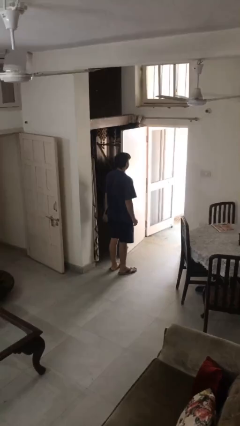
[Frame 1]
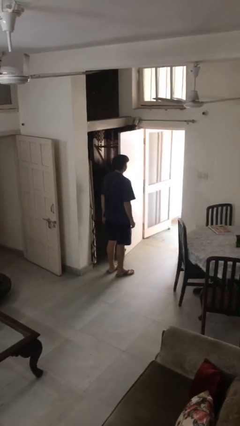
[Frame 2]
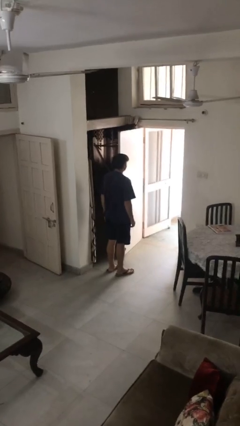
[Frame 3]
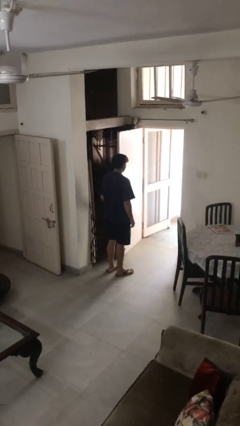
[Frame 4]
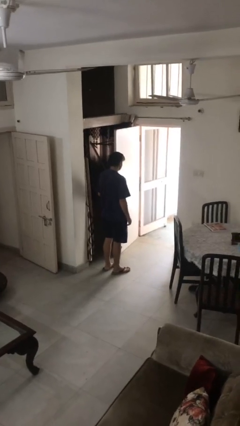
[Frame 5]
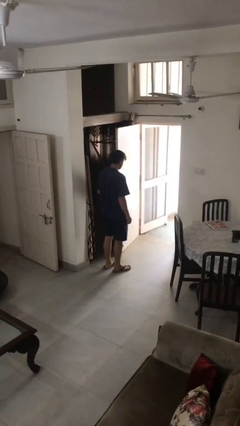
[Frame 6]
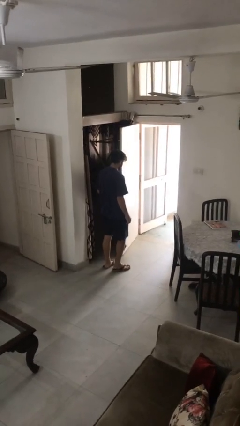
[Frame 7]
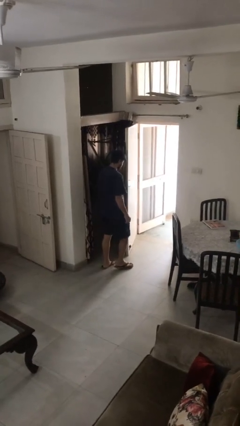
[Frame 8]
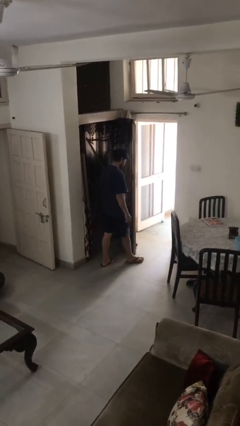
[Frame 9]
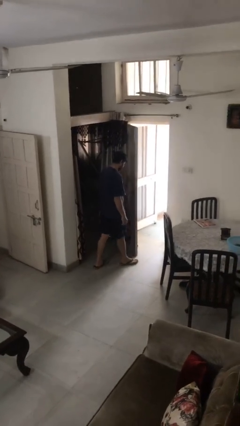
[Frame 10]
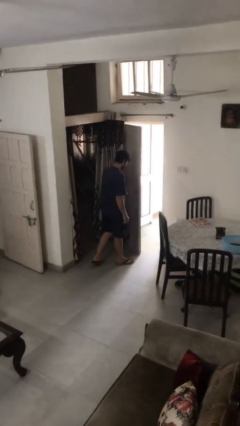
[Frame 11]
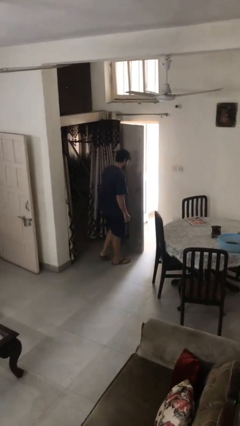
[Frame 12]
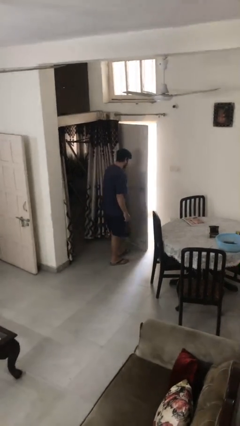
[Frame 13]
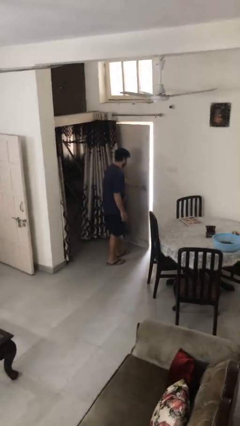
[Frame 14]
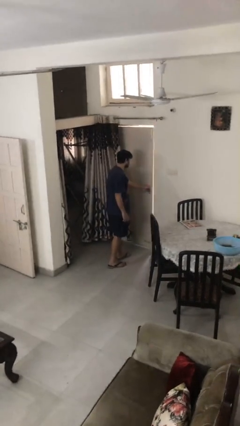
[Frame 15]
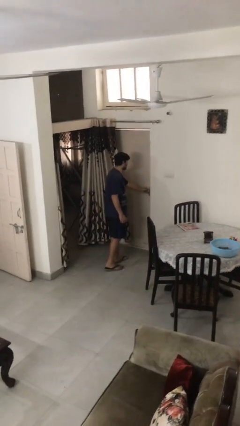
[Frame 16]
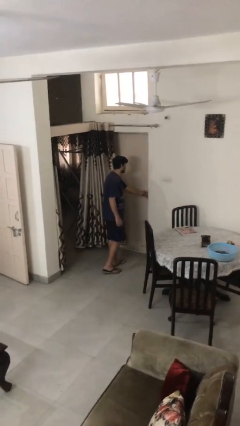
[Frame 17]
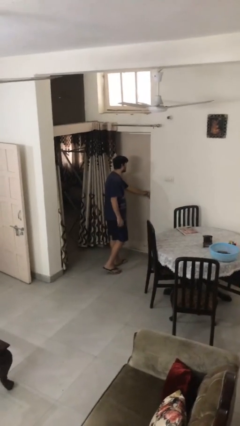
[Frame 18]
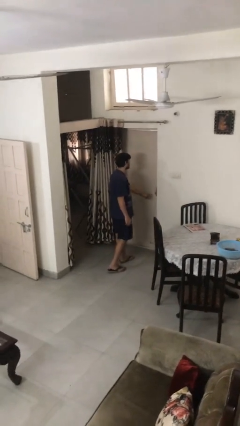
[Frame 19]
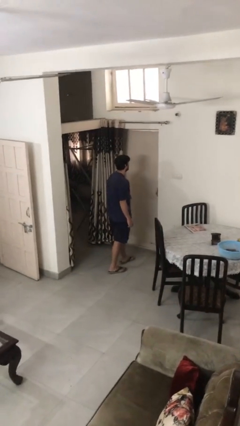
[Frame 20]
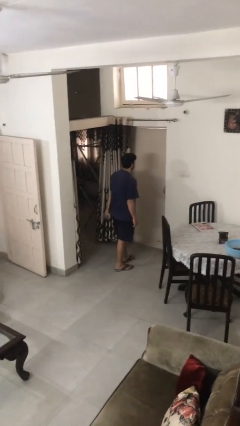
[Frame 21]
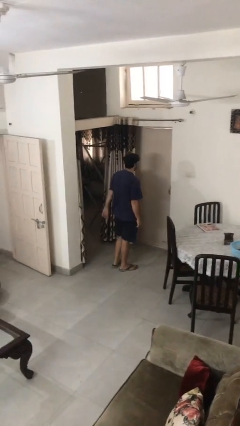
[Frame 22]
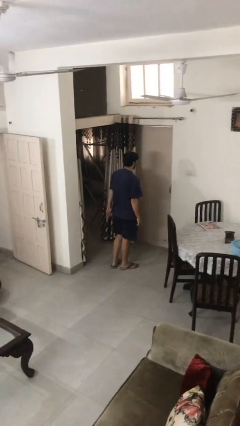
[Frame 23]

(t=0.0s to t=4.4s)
person closes facility door

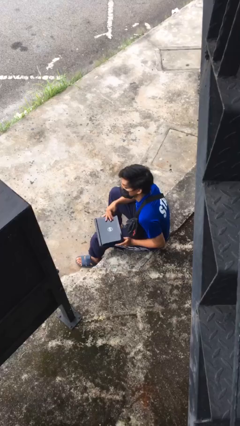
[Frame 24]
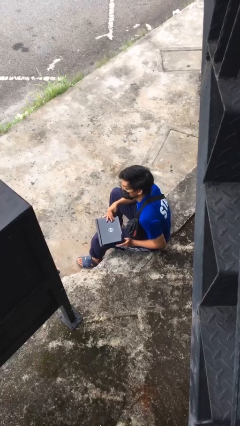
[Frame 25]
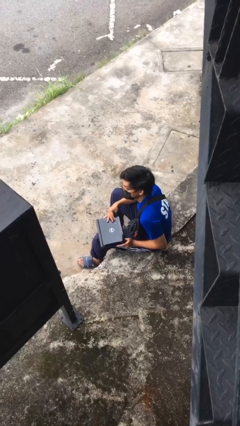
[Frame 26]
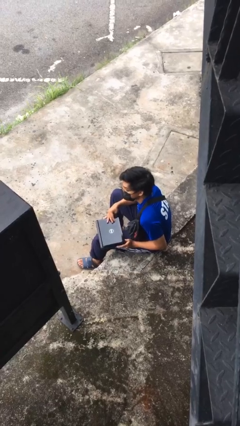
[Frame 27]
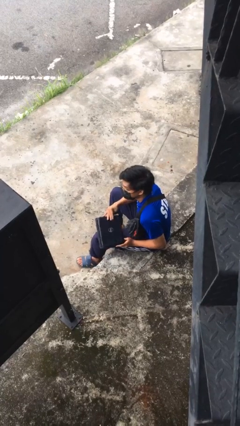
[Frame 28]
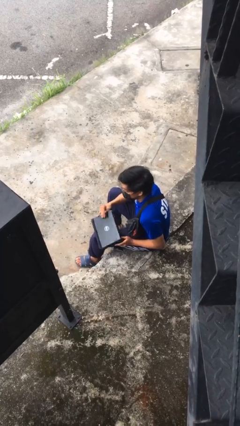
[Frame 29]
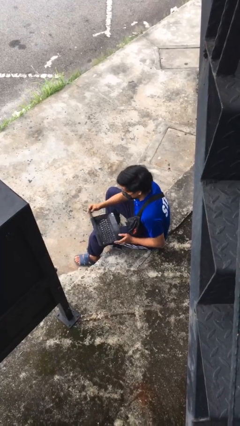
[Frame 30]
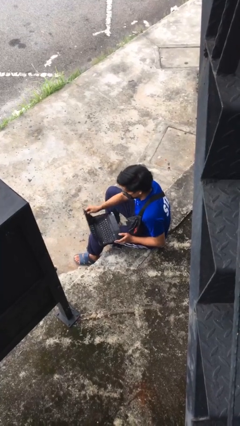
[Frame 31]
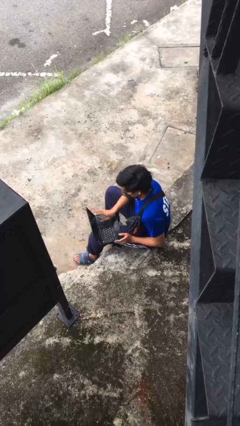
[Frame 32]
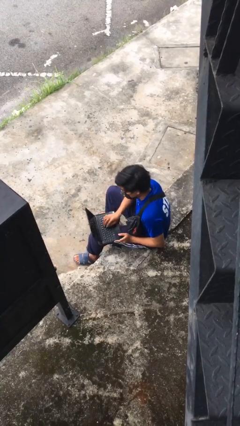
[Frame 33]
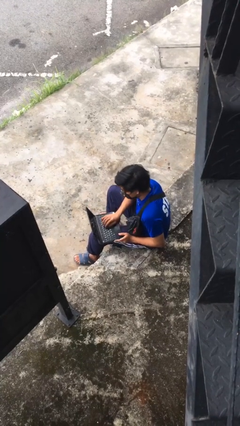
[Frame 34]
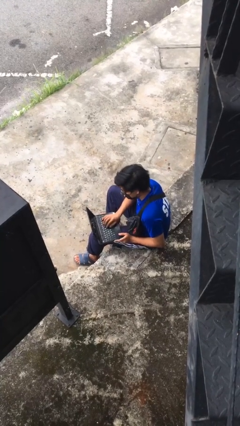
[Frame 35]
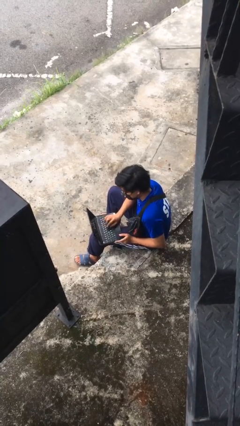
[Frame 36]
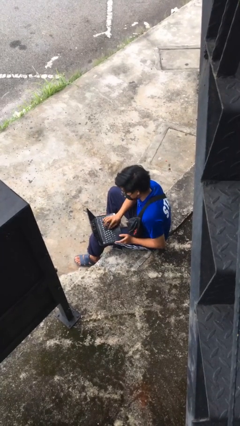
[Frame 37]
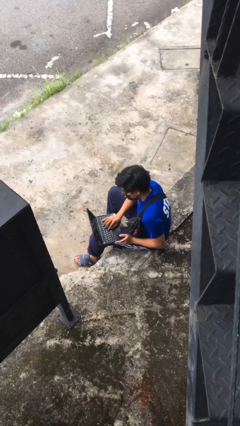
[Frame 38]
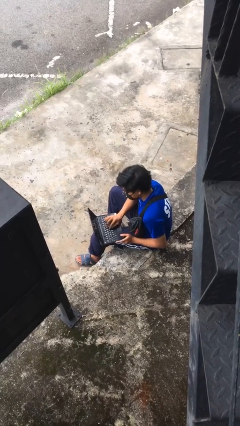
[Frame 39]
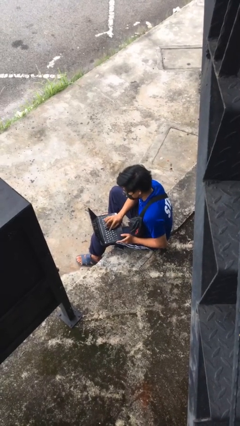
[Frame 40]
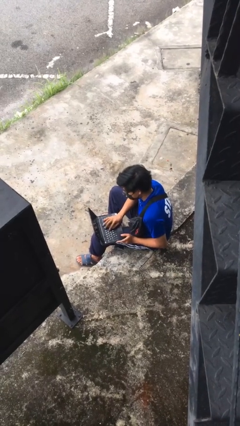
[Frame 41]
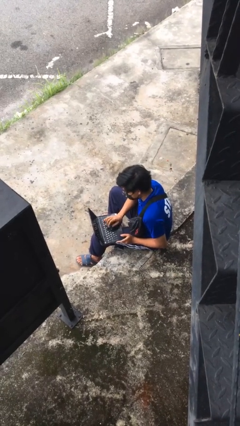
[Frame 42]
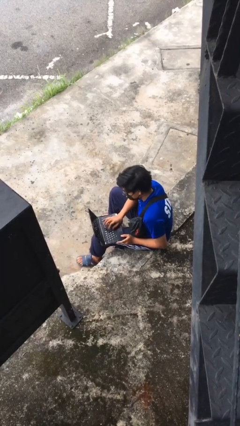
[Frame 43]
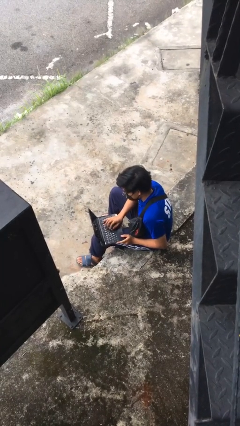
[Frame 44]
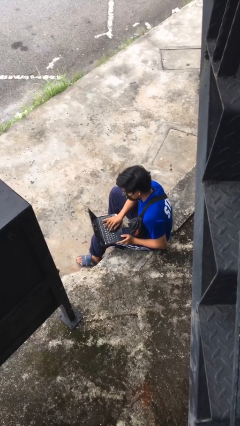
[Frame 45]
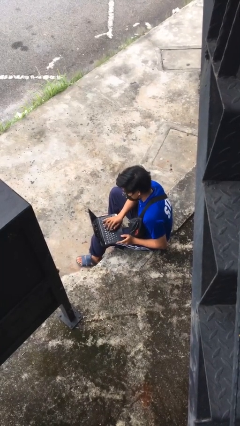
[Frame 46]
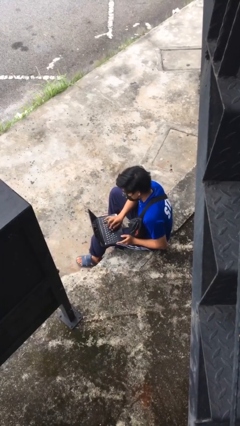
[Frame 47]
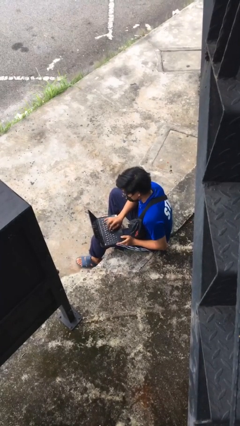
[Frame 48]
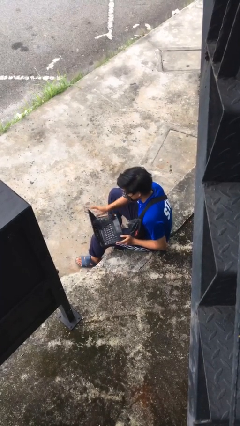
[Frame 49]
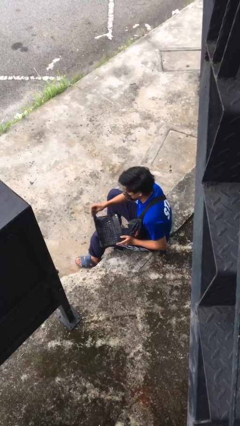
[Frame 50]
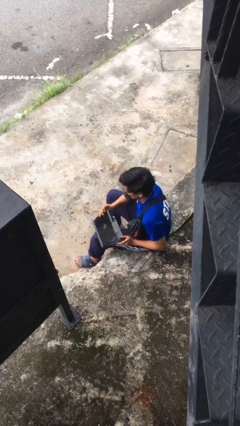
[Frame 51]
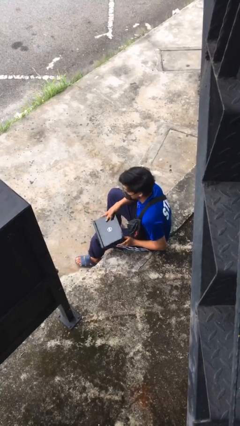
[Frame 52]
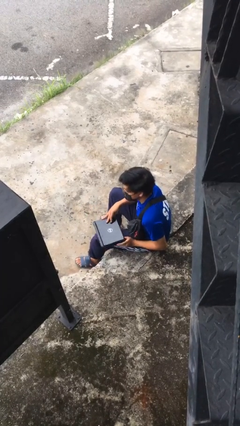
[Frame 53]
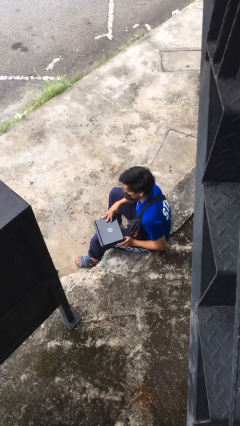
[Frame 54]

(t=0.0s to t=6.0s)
person interacts with laptop

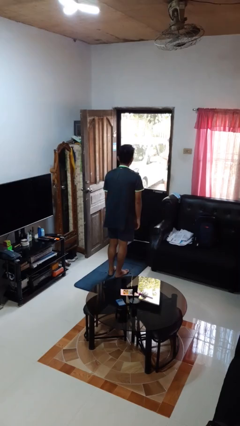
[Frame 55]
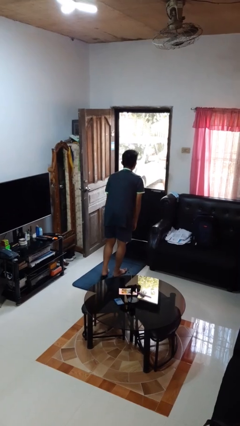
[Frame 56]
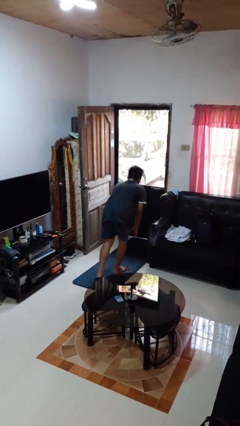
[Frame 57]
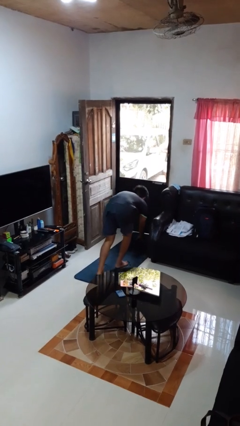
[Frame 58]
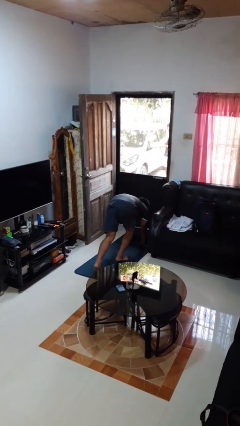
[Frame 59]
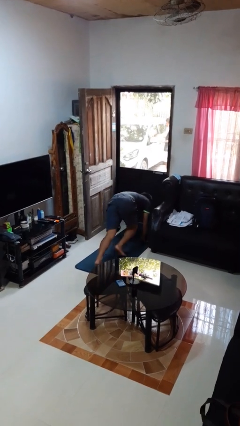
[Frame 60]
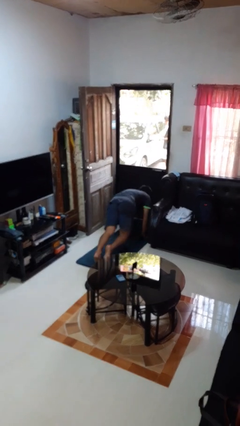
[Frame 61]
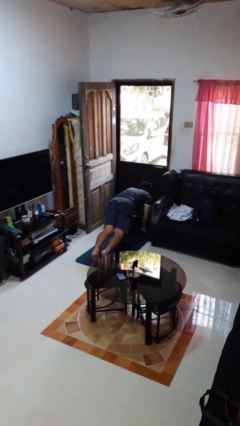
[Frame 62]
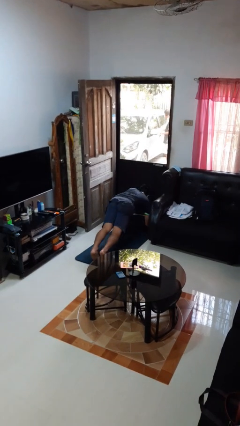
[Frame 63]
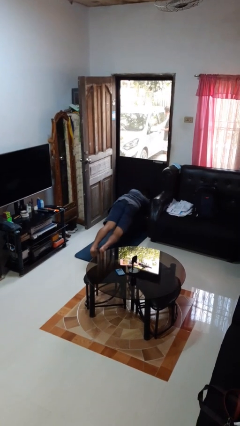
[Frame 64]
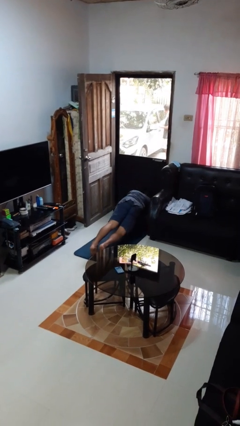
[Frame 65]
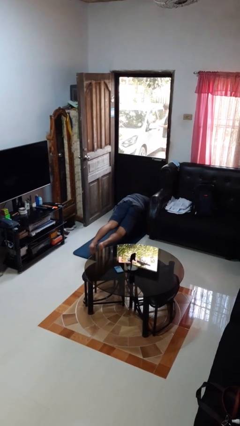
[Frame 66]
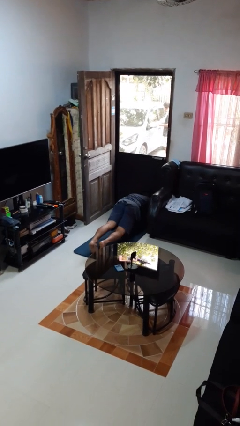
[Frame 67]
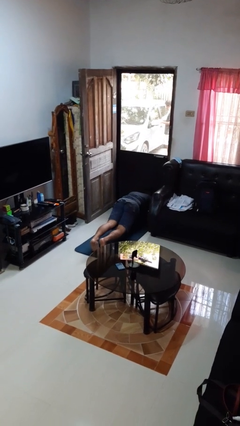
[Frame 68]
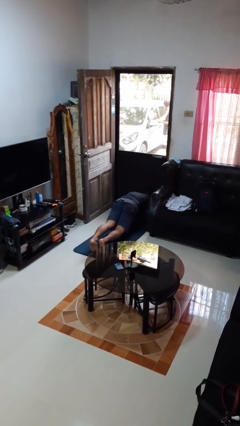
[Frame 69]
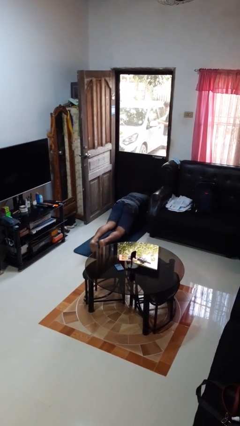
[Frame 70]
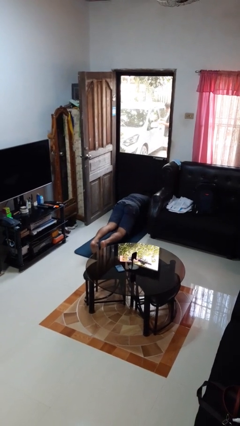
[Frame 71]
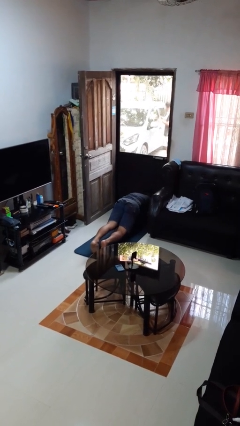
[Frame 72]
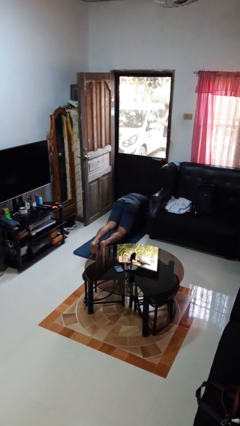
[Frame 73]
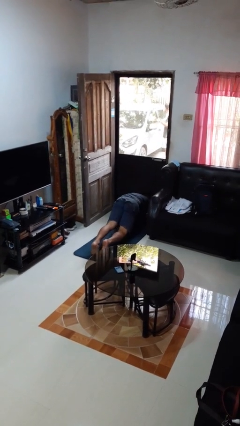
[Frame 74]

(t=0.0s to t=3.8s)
person exercises with plank

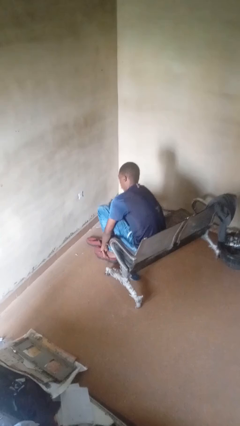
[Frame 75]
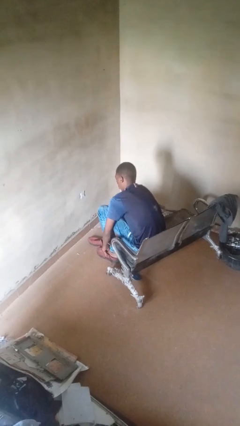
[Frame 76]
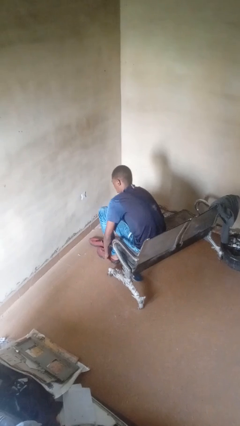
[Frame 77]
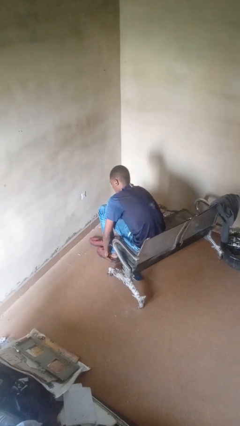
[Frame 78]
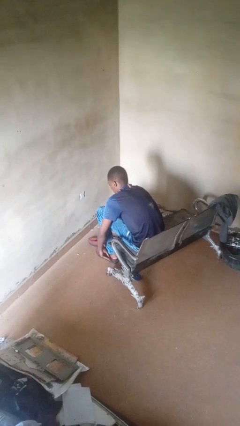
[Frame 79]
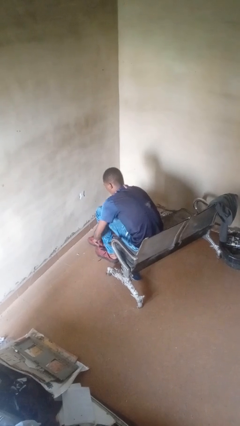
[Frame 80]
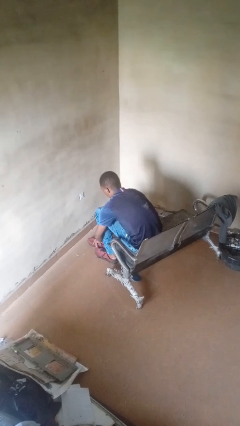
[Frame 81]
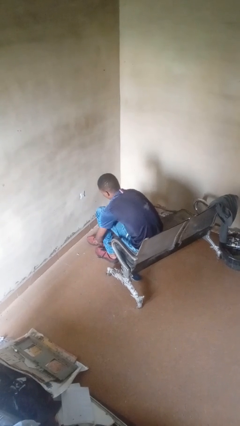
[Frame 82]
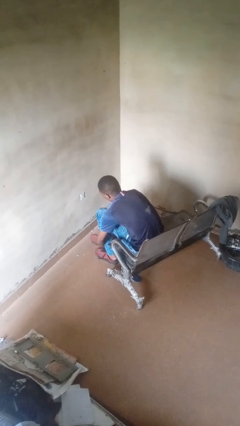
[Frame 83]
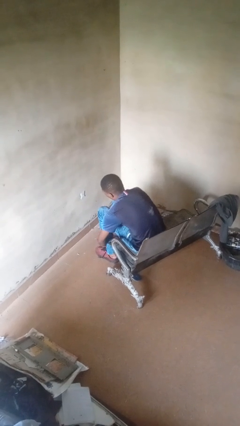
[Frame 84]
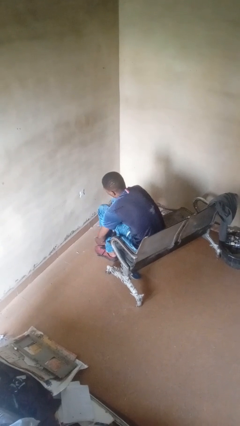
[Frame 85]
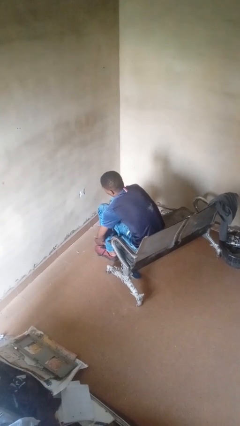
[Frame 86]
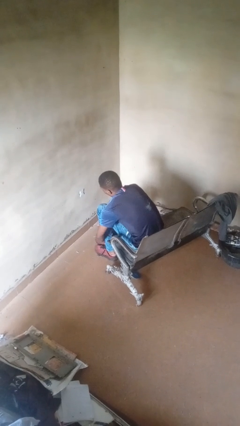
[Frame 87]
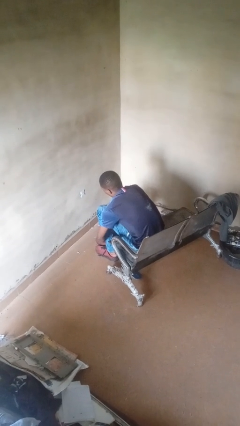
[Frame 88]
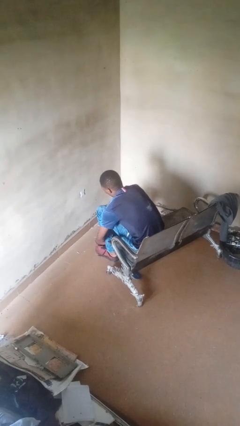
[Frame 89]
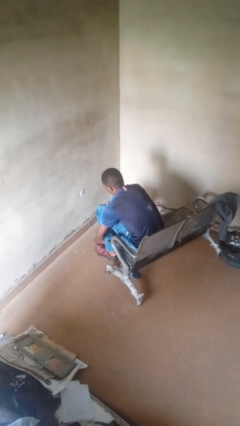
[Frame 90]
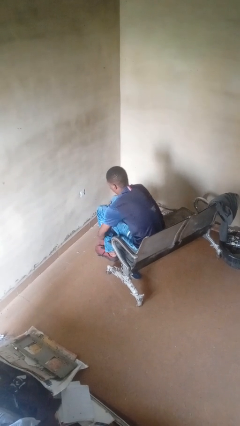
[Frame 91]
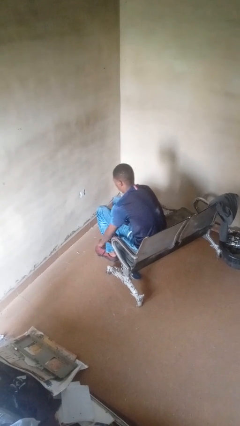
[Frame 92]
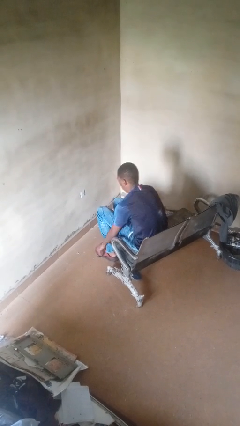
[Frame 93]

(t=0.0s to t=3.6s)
person puts on shoes
